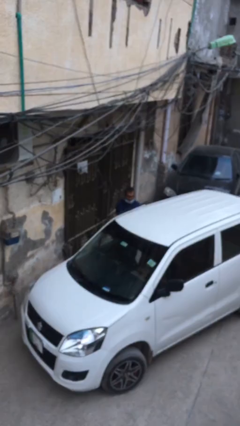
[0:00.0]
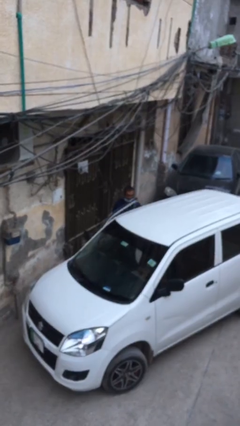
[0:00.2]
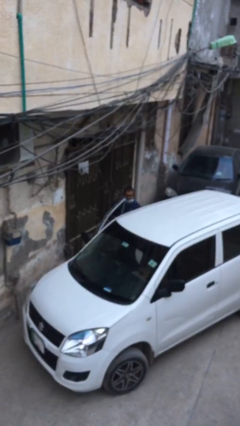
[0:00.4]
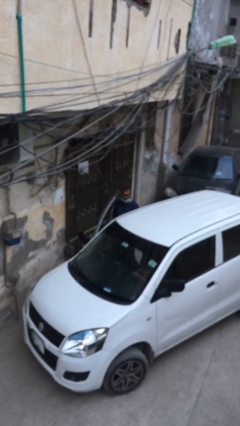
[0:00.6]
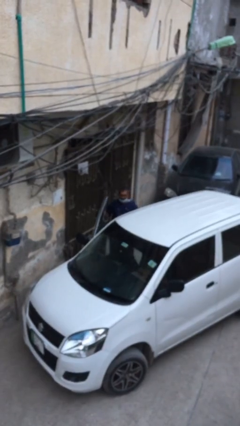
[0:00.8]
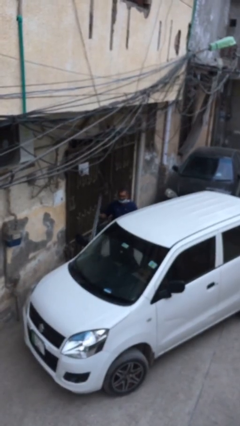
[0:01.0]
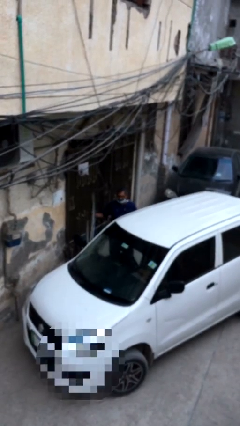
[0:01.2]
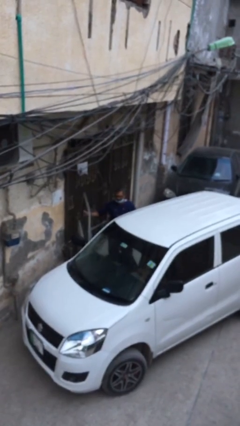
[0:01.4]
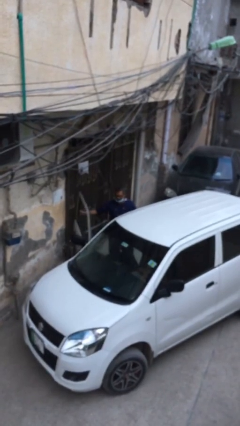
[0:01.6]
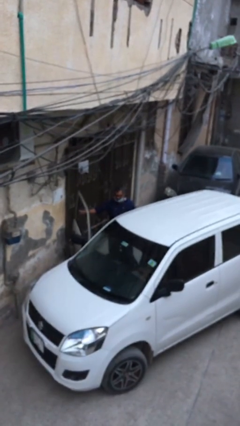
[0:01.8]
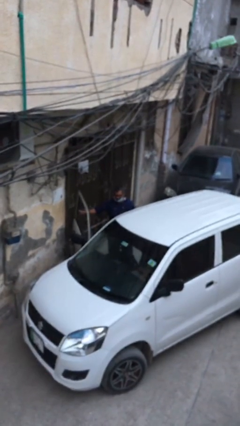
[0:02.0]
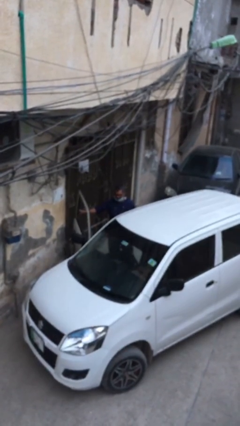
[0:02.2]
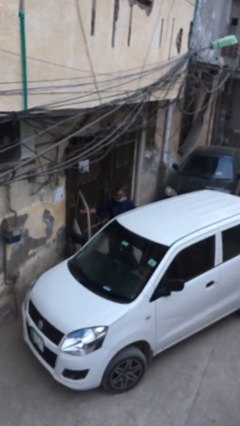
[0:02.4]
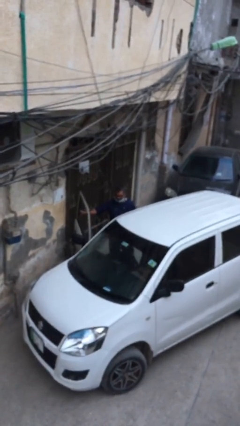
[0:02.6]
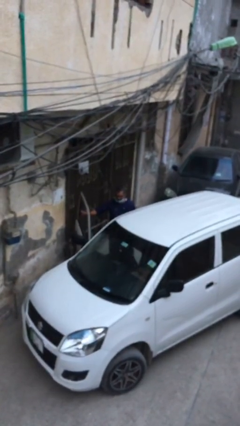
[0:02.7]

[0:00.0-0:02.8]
person opens car door

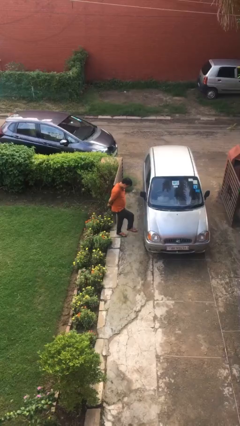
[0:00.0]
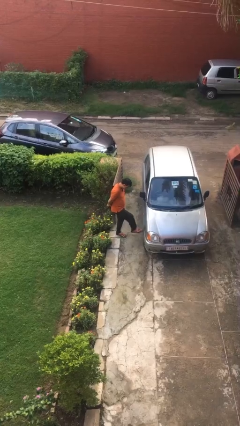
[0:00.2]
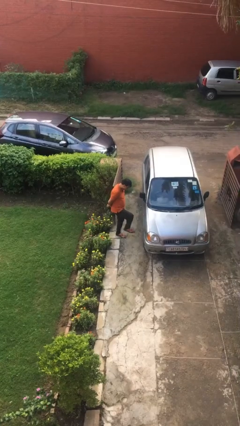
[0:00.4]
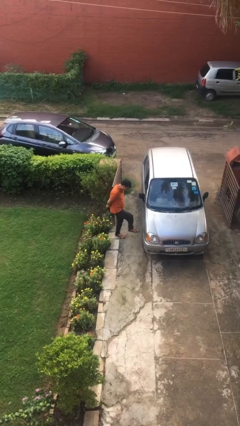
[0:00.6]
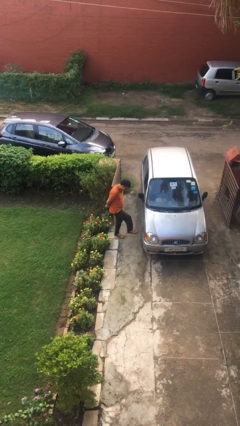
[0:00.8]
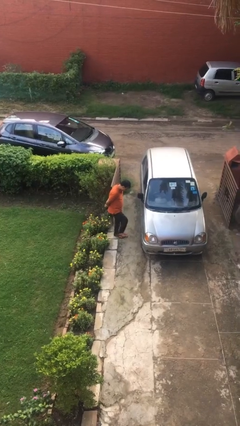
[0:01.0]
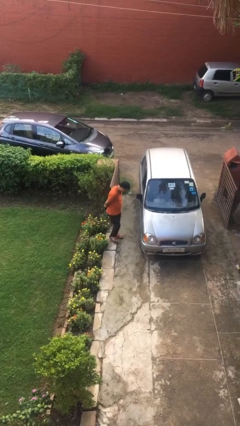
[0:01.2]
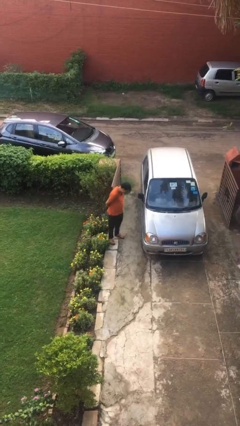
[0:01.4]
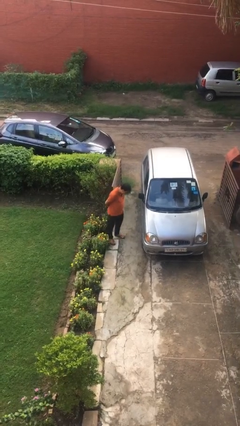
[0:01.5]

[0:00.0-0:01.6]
person kicks car tires

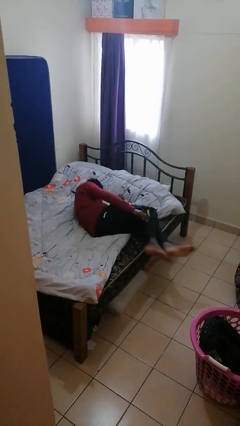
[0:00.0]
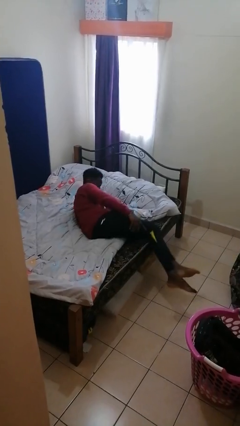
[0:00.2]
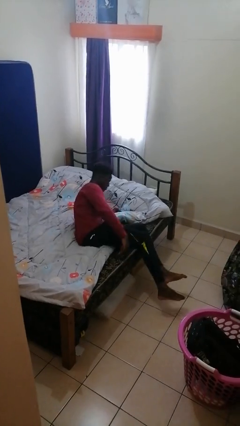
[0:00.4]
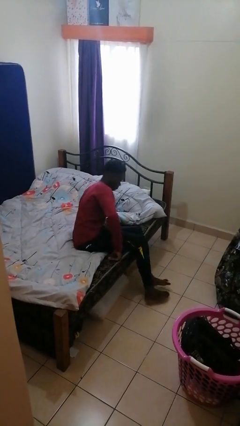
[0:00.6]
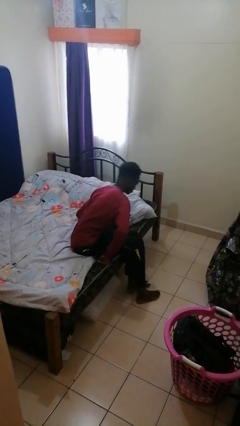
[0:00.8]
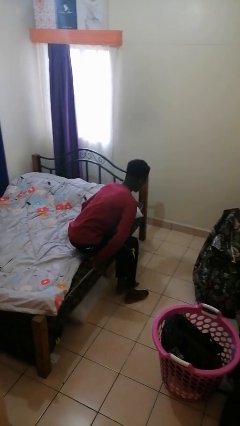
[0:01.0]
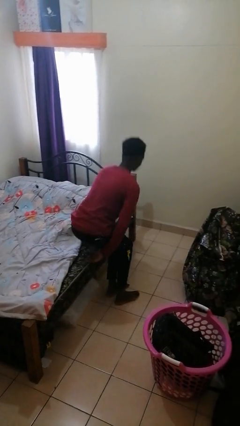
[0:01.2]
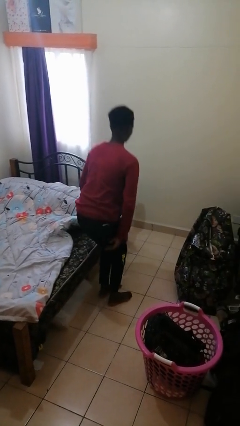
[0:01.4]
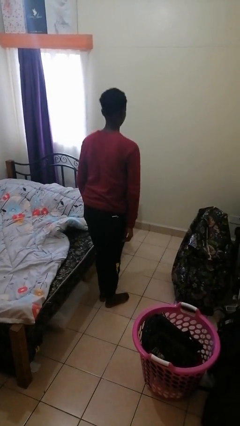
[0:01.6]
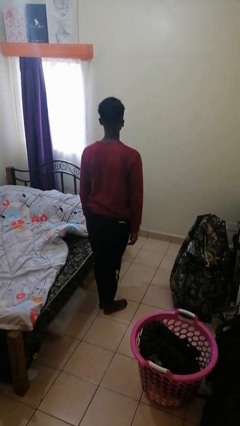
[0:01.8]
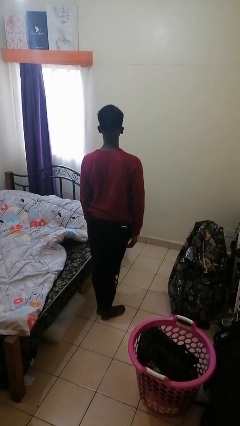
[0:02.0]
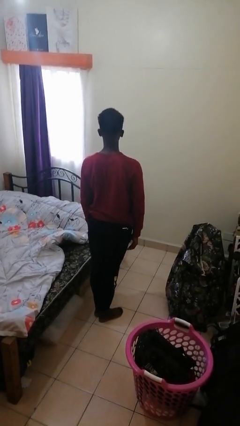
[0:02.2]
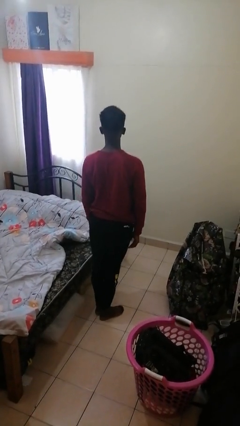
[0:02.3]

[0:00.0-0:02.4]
person stands up

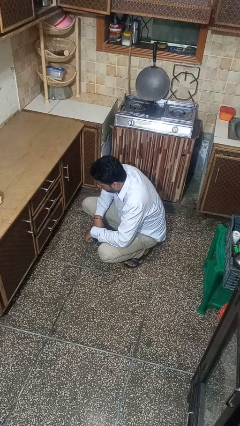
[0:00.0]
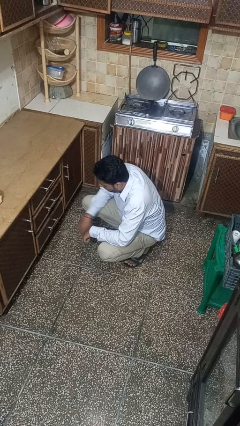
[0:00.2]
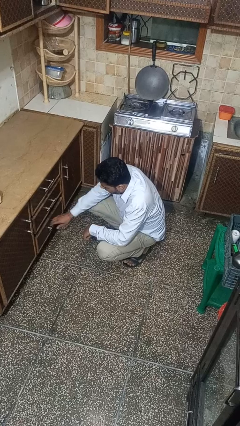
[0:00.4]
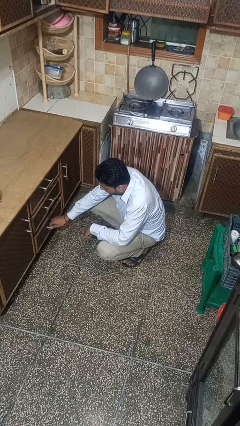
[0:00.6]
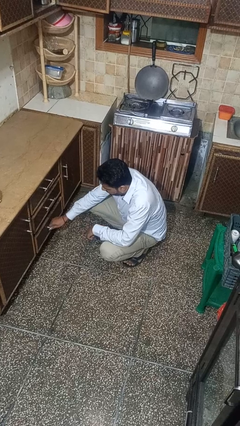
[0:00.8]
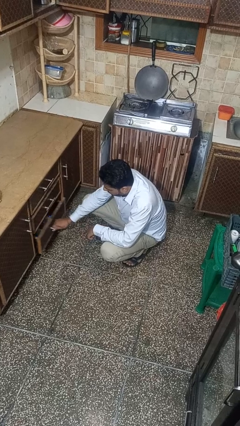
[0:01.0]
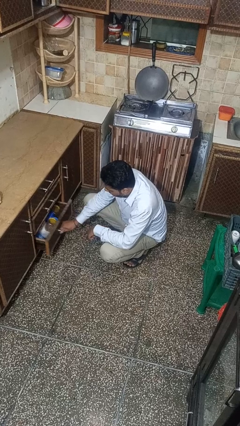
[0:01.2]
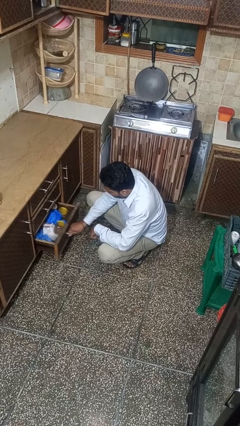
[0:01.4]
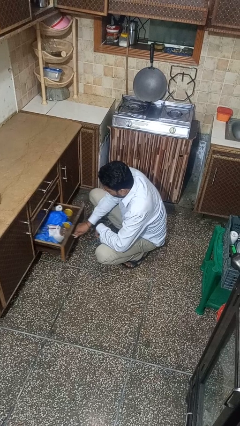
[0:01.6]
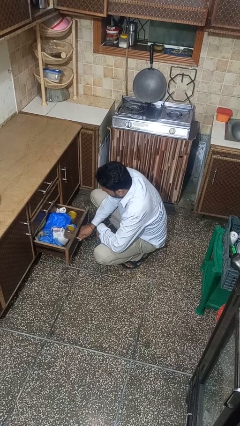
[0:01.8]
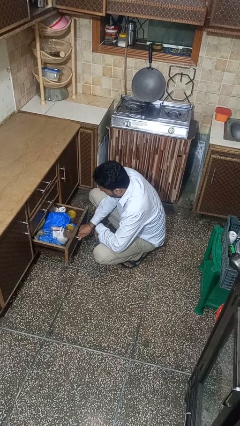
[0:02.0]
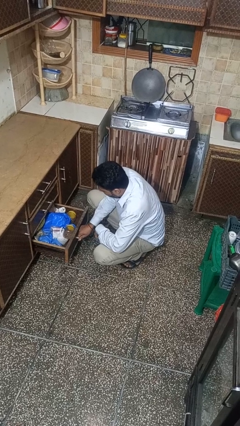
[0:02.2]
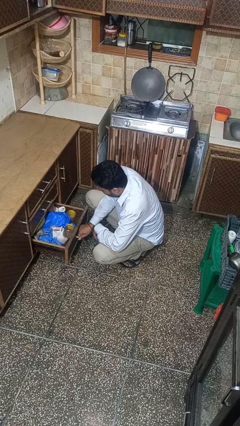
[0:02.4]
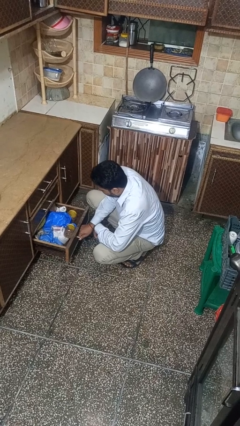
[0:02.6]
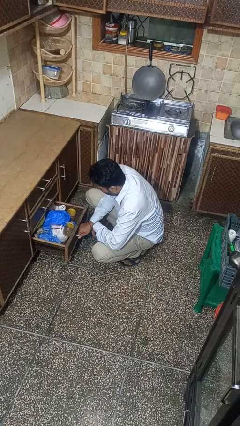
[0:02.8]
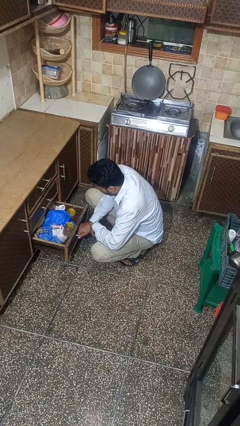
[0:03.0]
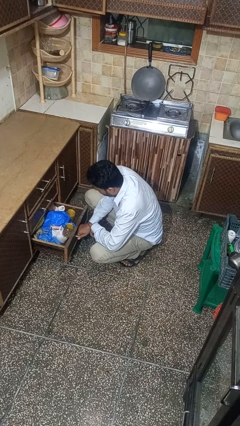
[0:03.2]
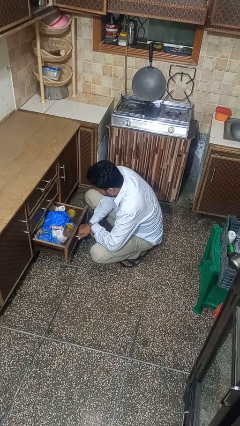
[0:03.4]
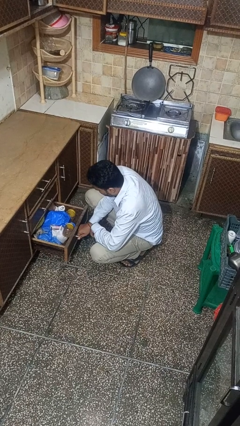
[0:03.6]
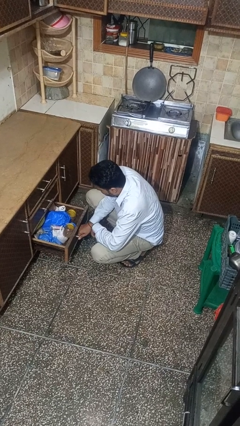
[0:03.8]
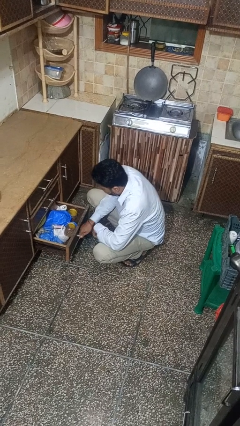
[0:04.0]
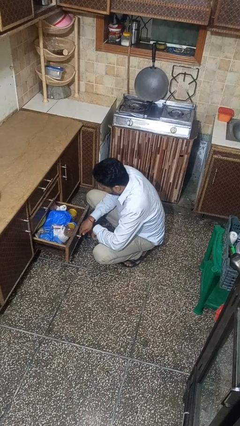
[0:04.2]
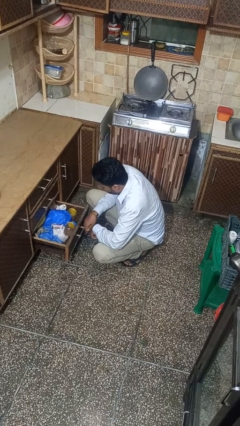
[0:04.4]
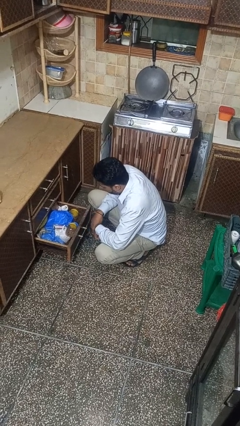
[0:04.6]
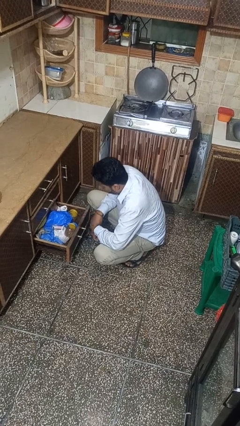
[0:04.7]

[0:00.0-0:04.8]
person opens kitchen drawer

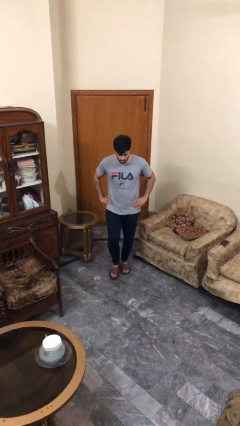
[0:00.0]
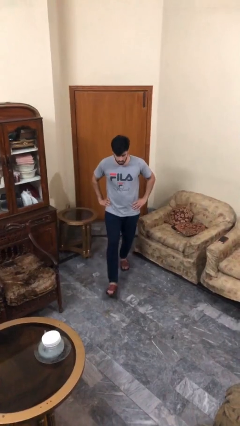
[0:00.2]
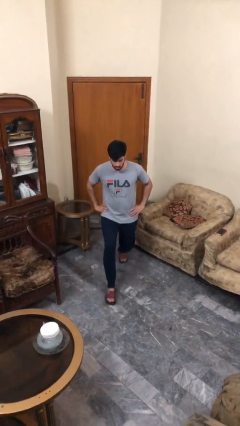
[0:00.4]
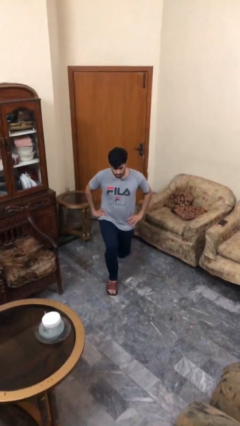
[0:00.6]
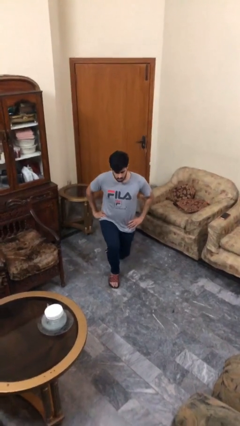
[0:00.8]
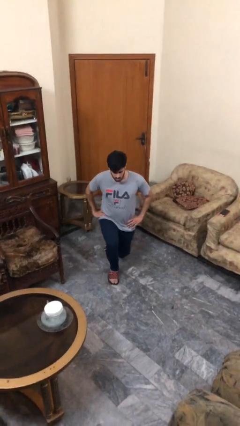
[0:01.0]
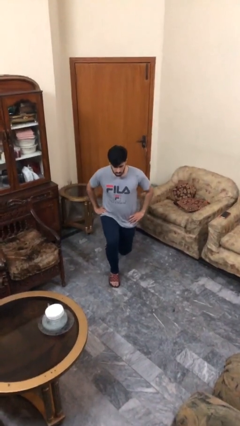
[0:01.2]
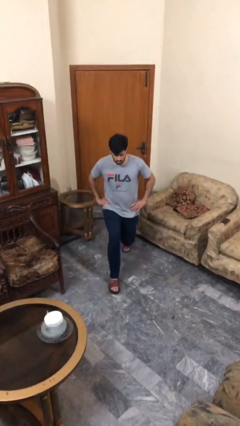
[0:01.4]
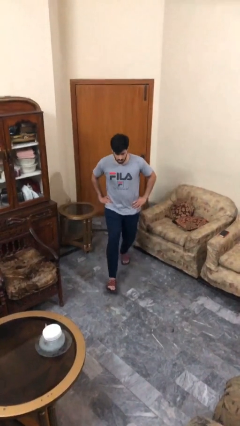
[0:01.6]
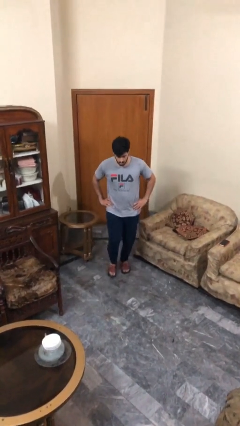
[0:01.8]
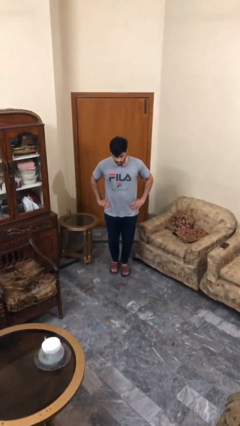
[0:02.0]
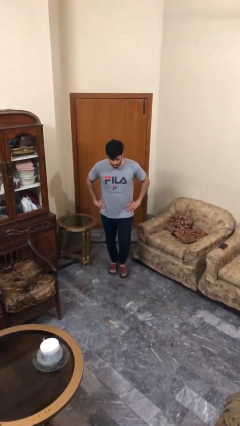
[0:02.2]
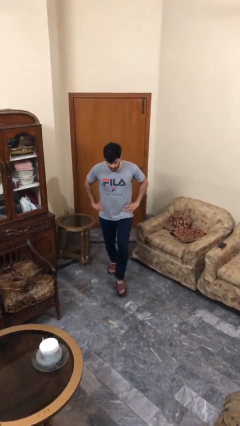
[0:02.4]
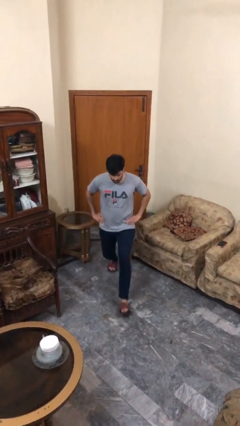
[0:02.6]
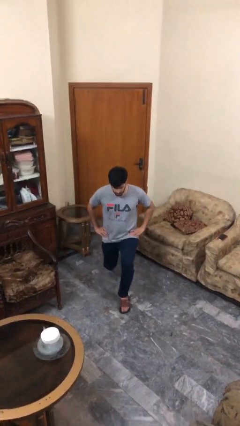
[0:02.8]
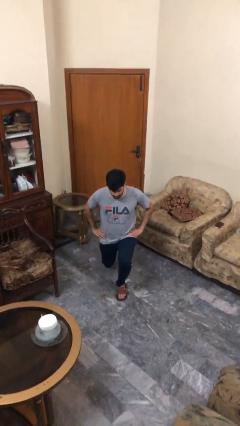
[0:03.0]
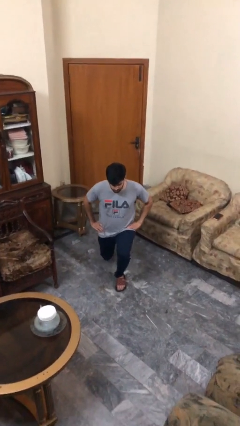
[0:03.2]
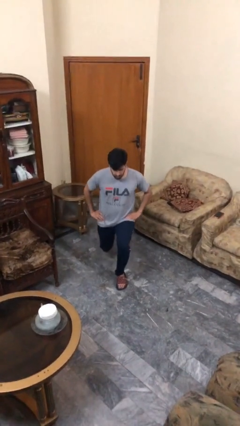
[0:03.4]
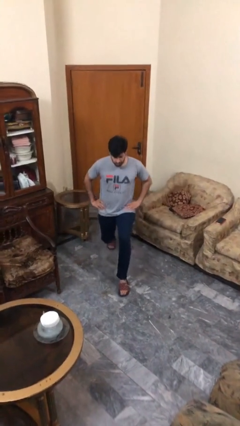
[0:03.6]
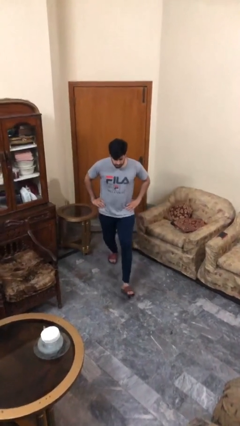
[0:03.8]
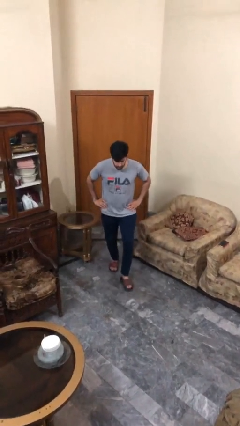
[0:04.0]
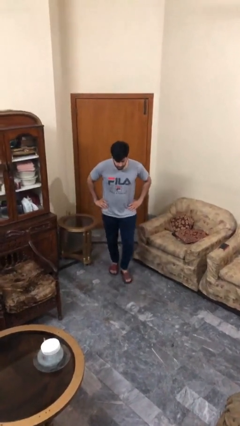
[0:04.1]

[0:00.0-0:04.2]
person exercises with lunges

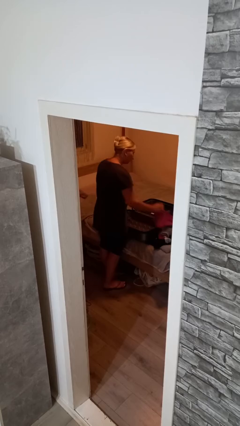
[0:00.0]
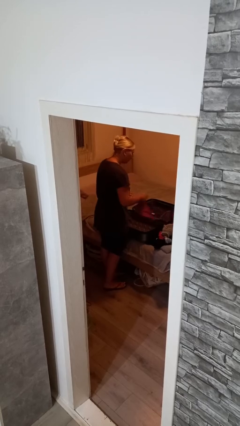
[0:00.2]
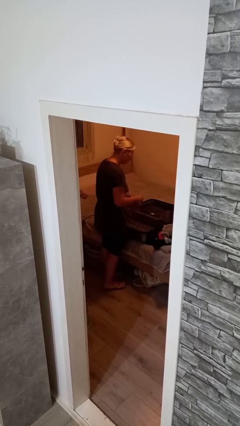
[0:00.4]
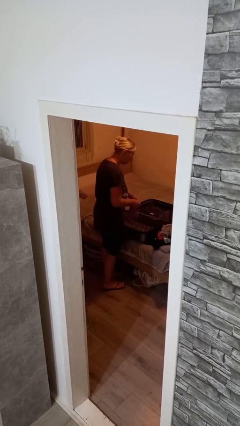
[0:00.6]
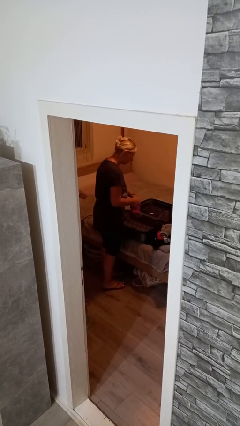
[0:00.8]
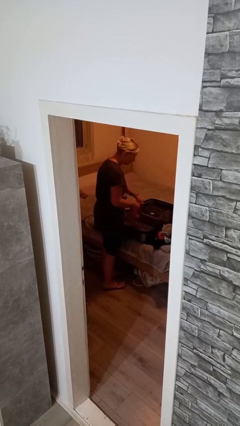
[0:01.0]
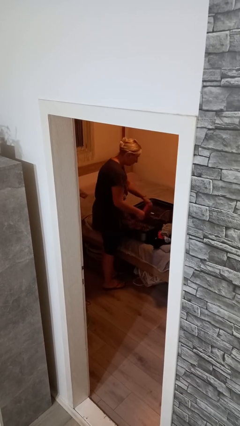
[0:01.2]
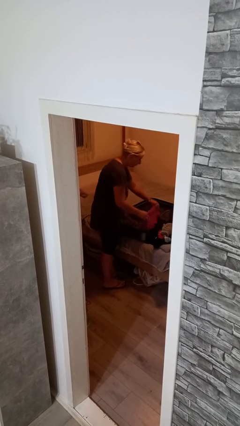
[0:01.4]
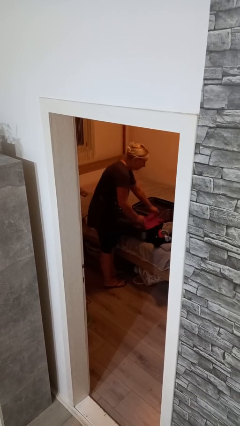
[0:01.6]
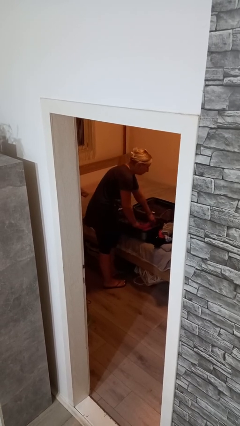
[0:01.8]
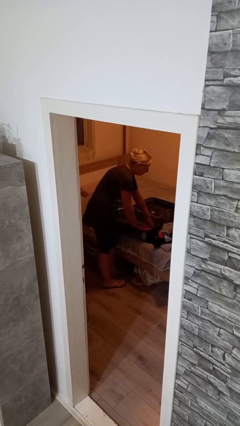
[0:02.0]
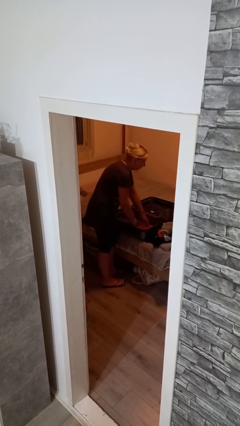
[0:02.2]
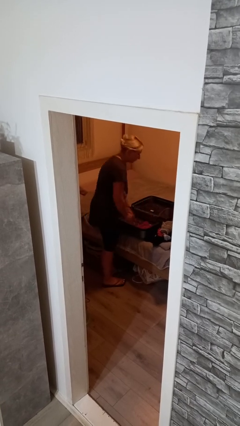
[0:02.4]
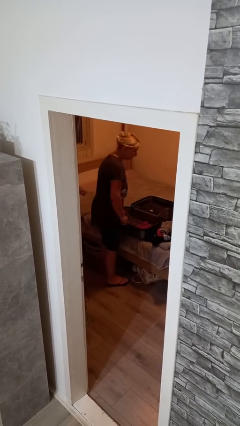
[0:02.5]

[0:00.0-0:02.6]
person loads clothes into suitcase
